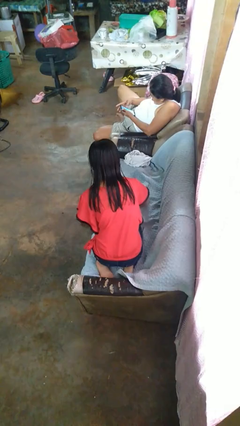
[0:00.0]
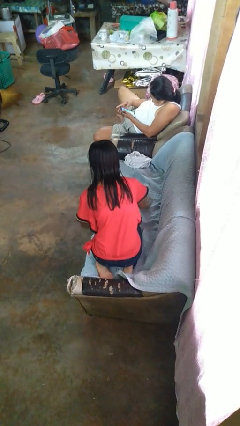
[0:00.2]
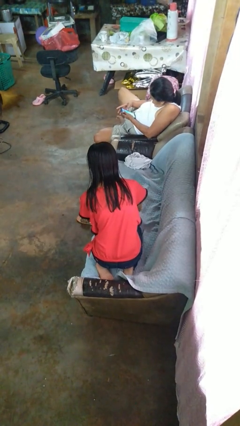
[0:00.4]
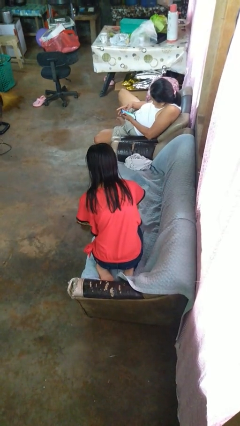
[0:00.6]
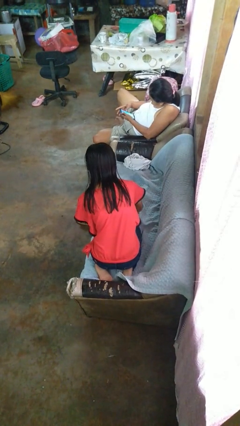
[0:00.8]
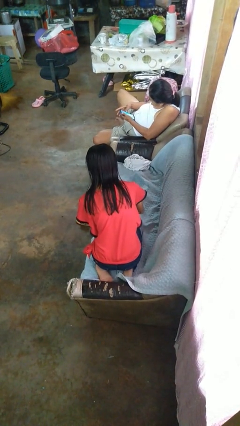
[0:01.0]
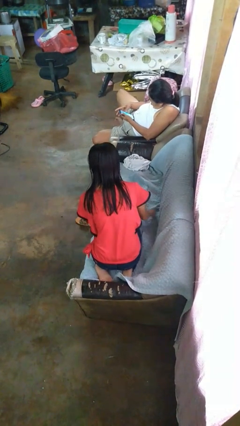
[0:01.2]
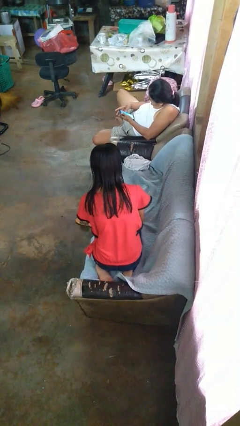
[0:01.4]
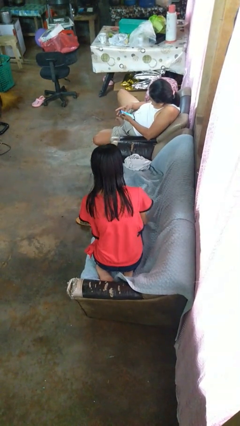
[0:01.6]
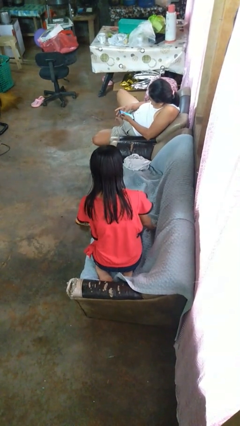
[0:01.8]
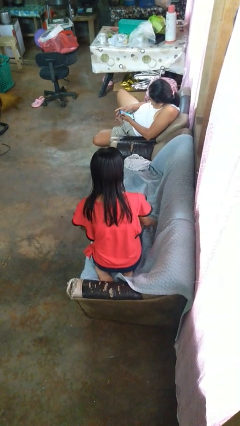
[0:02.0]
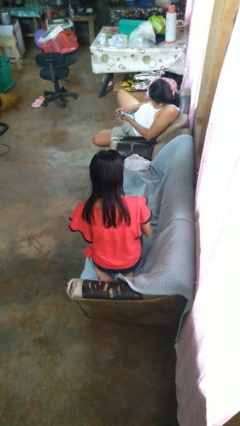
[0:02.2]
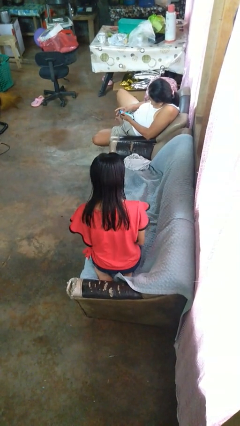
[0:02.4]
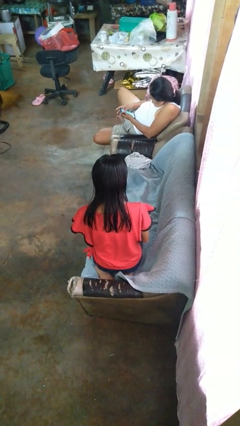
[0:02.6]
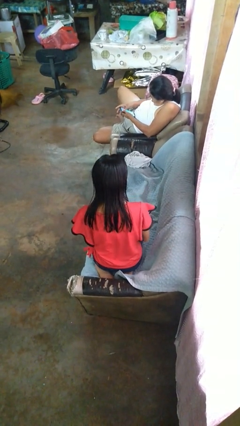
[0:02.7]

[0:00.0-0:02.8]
person searches in couch

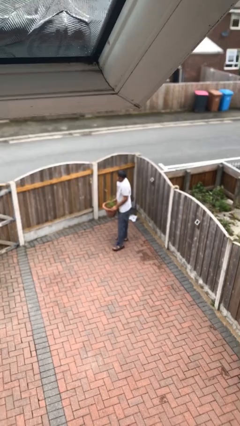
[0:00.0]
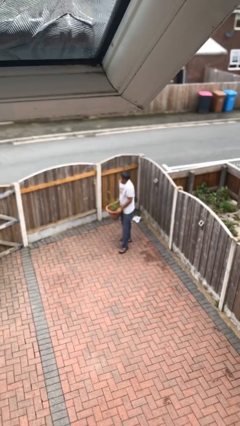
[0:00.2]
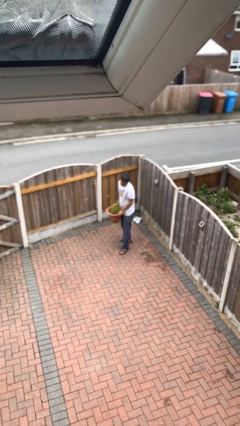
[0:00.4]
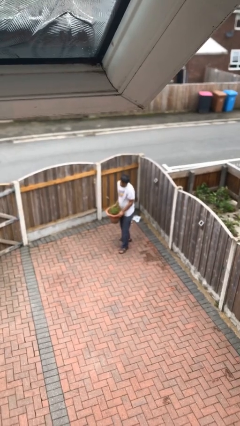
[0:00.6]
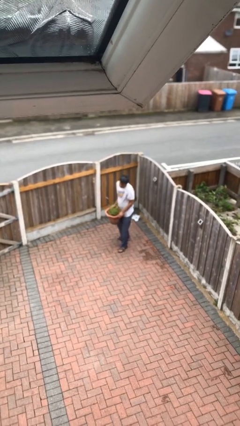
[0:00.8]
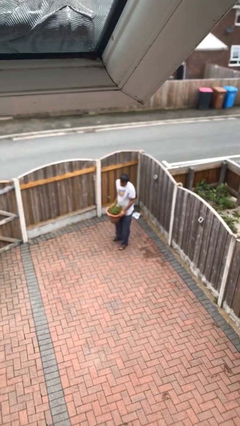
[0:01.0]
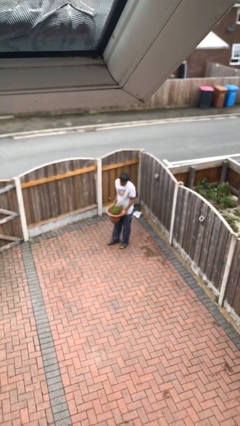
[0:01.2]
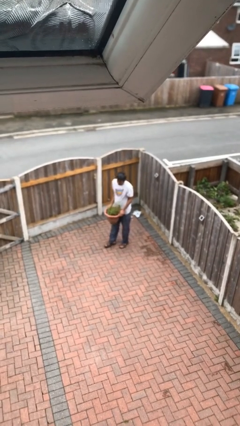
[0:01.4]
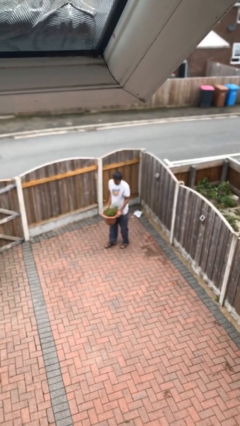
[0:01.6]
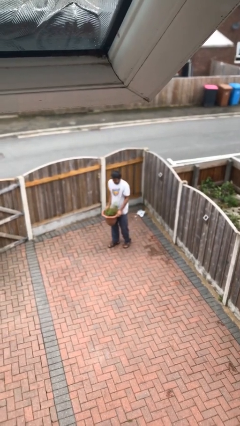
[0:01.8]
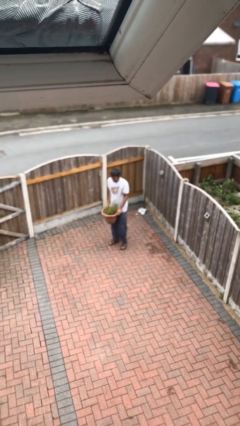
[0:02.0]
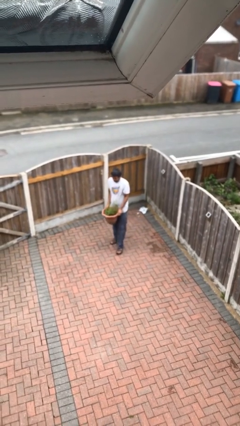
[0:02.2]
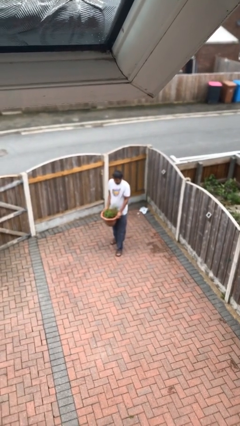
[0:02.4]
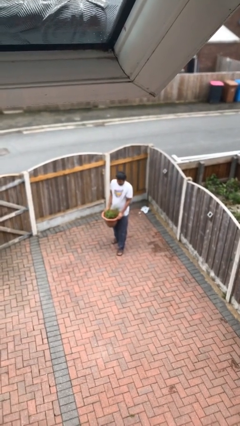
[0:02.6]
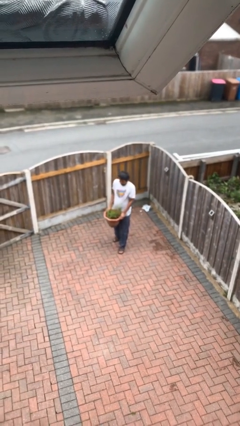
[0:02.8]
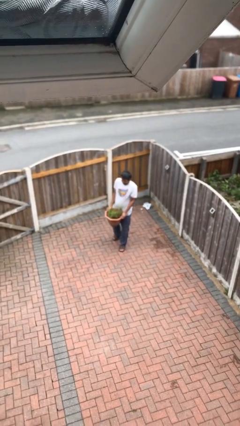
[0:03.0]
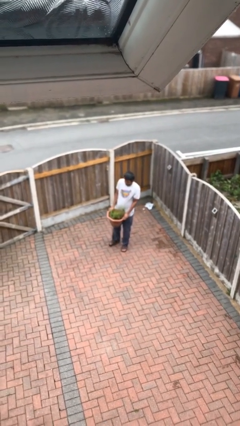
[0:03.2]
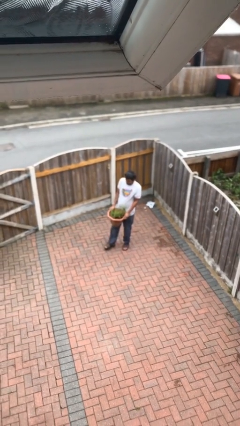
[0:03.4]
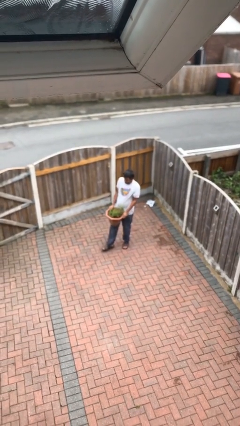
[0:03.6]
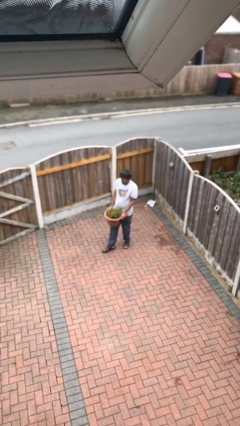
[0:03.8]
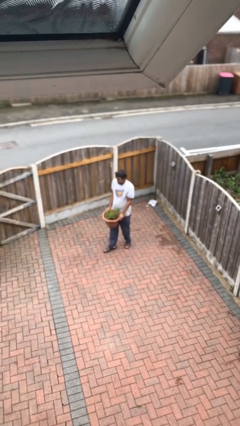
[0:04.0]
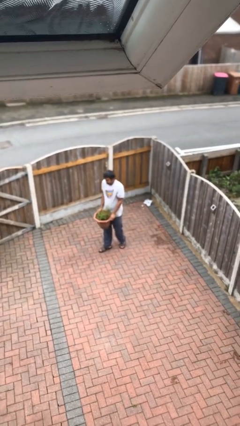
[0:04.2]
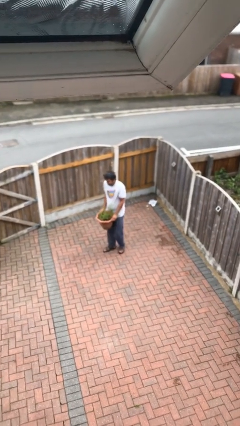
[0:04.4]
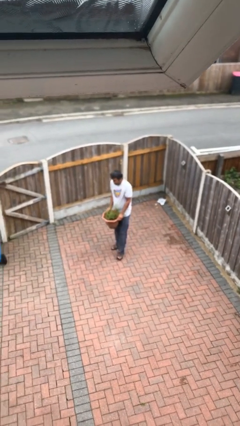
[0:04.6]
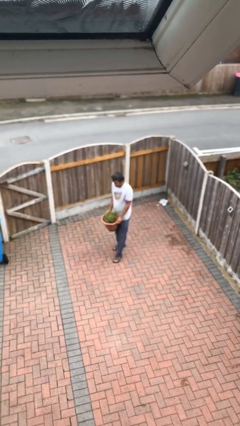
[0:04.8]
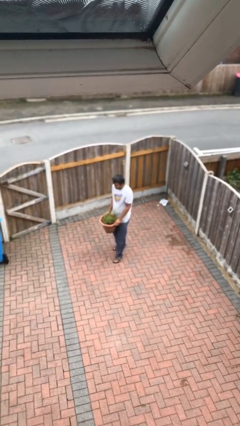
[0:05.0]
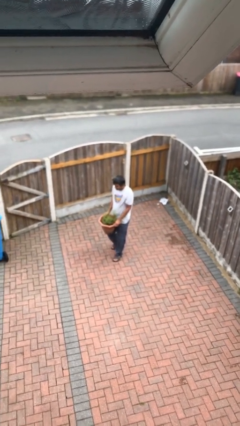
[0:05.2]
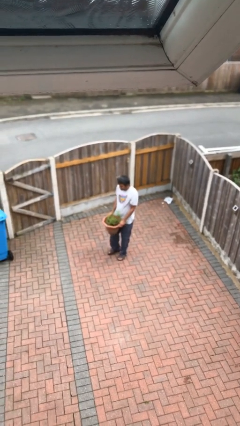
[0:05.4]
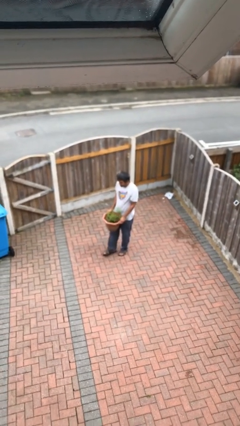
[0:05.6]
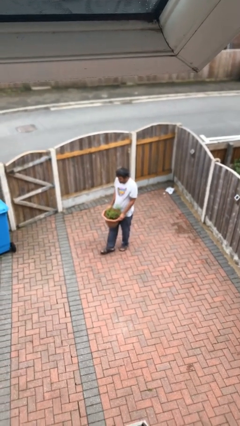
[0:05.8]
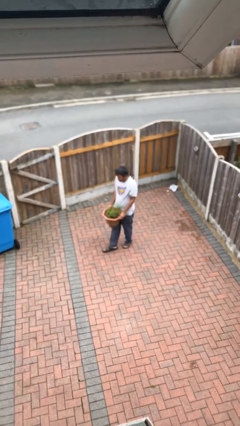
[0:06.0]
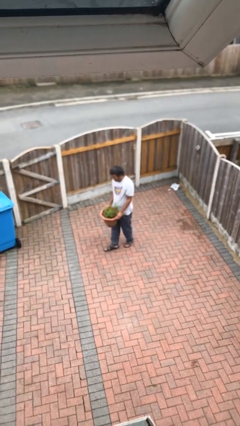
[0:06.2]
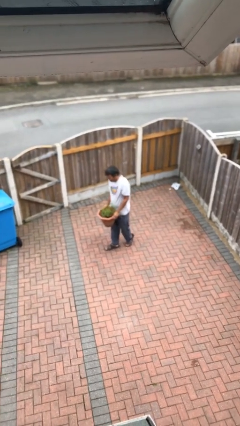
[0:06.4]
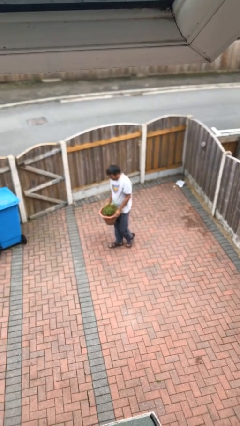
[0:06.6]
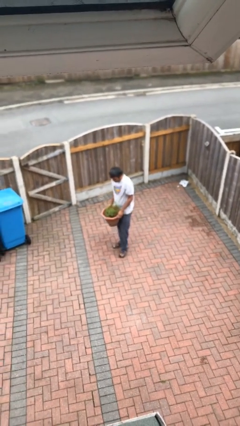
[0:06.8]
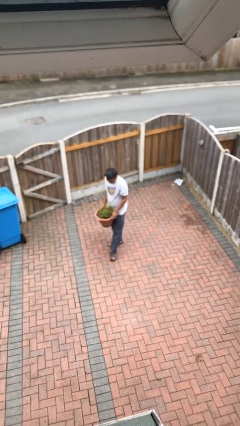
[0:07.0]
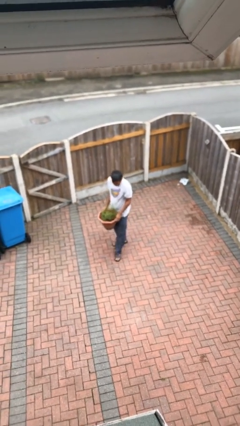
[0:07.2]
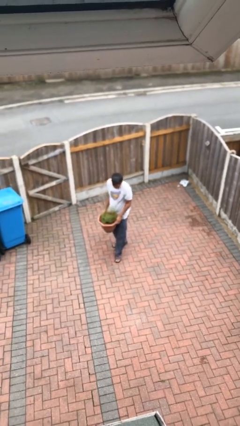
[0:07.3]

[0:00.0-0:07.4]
person carries heavy object

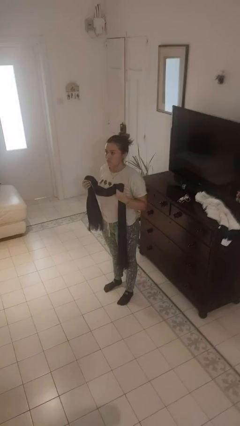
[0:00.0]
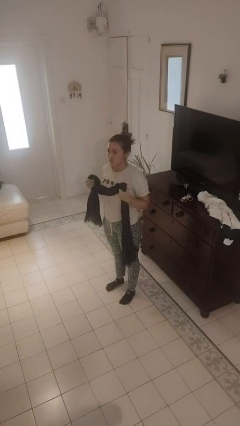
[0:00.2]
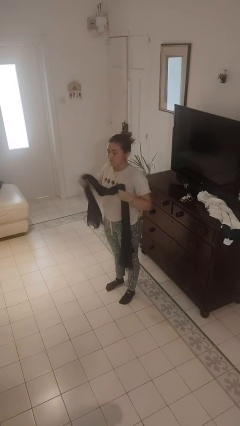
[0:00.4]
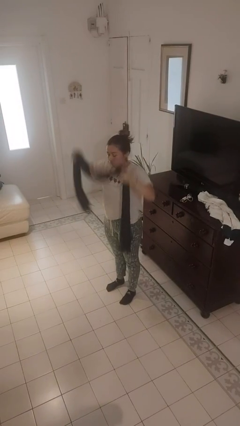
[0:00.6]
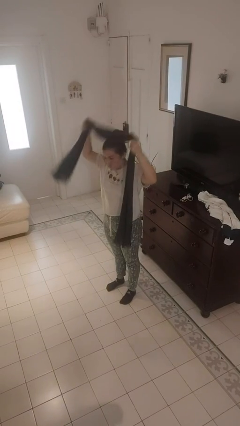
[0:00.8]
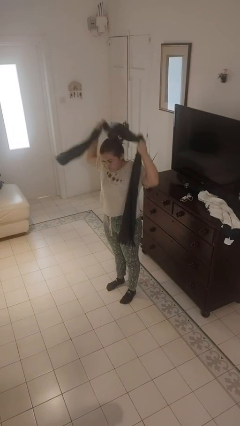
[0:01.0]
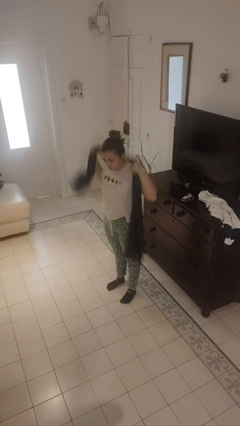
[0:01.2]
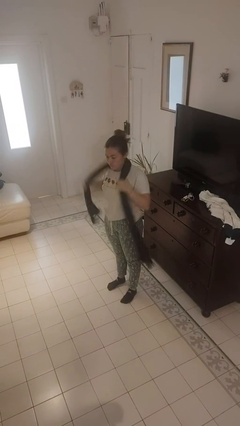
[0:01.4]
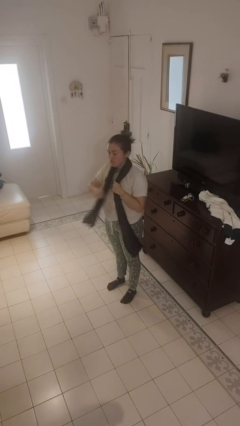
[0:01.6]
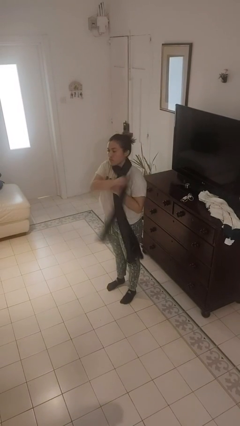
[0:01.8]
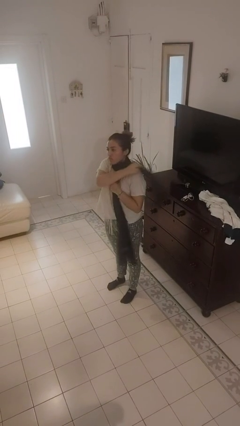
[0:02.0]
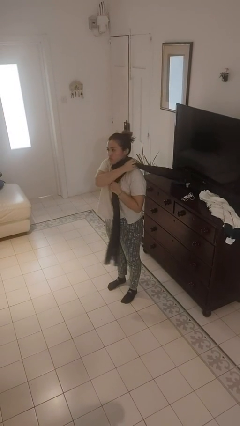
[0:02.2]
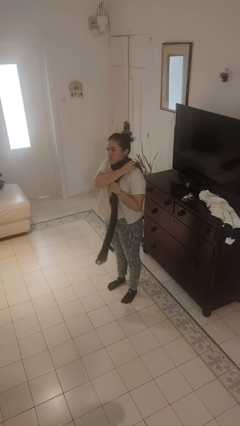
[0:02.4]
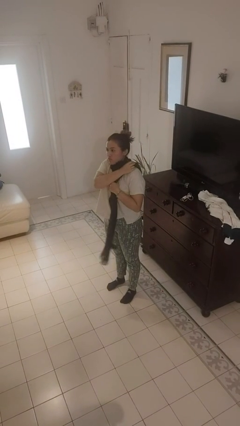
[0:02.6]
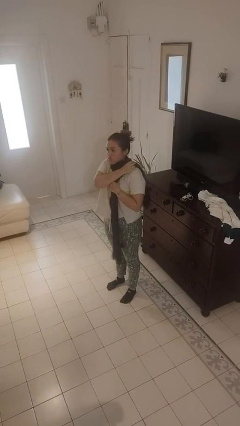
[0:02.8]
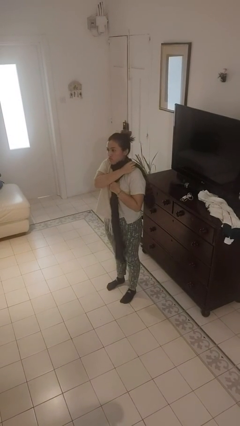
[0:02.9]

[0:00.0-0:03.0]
person puts on scarf

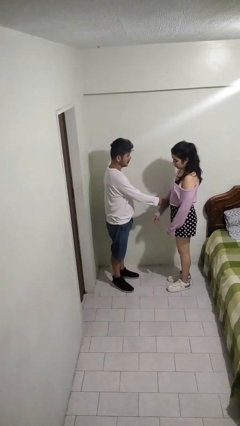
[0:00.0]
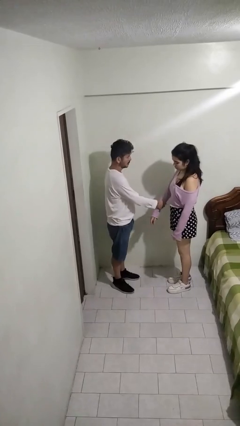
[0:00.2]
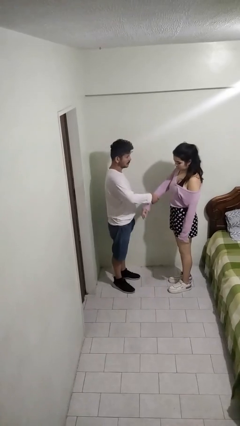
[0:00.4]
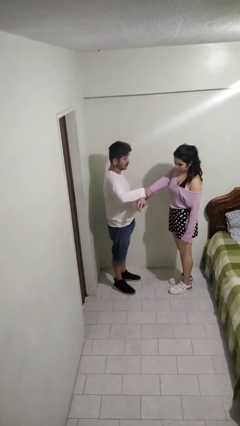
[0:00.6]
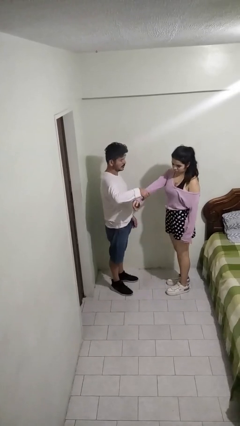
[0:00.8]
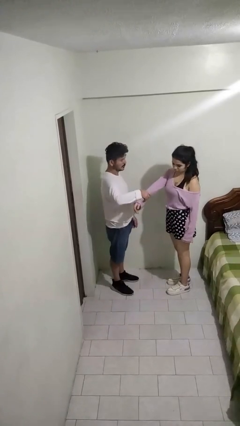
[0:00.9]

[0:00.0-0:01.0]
person grabs person by forearm
